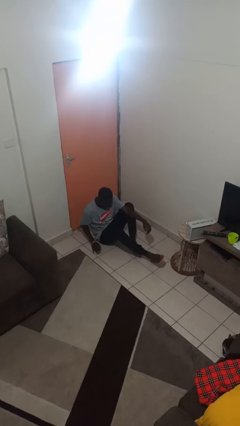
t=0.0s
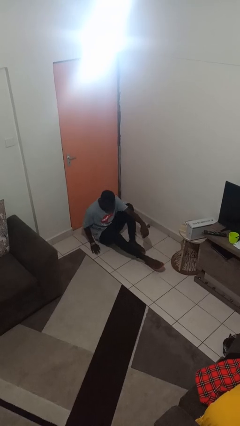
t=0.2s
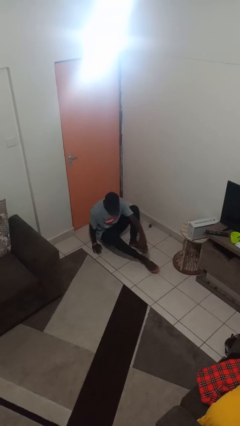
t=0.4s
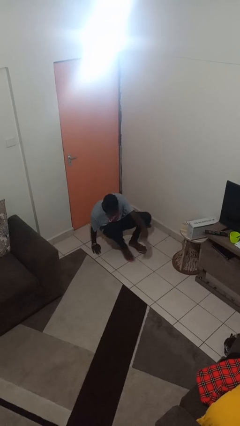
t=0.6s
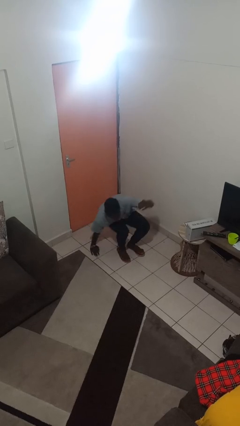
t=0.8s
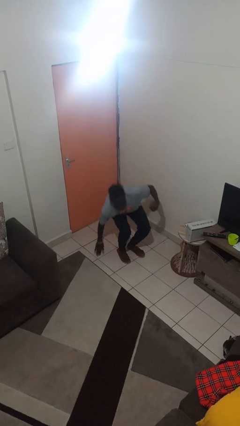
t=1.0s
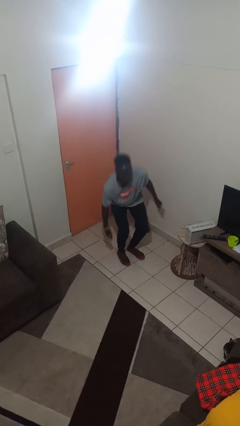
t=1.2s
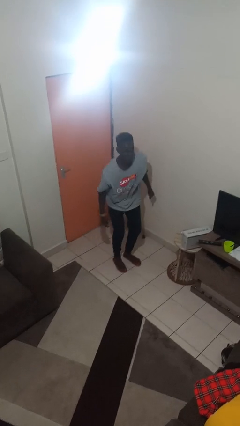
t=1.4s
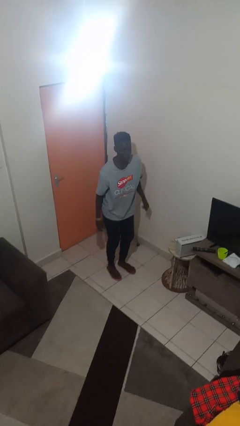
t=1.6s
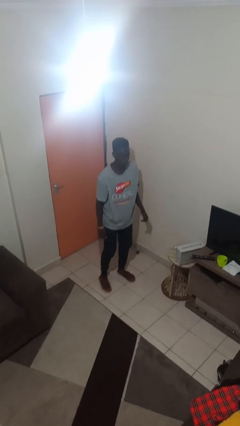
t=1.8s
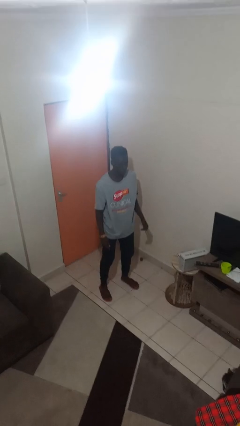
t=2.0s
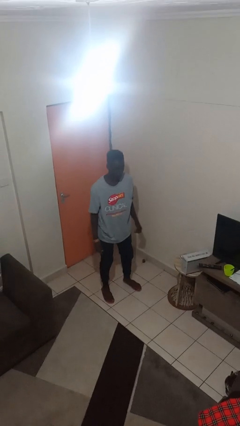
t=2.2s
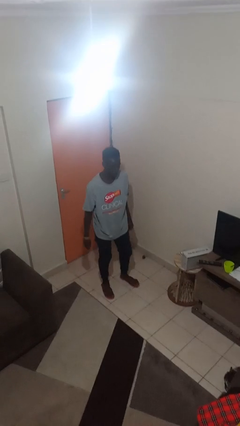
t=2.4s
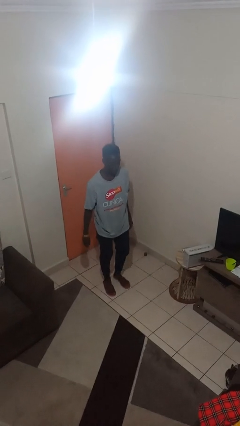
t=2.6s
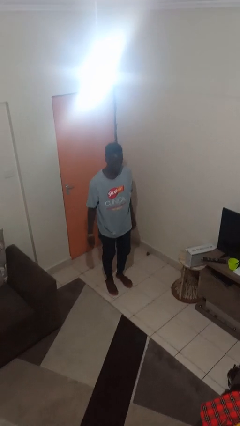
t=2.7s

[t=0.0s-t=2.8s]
person stands up from floor

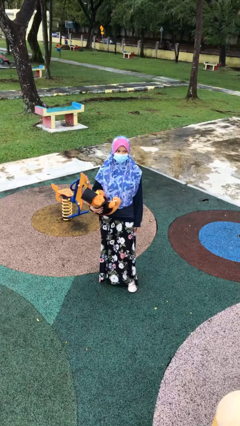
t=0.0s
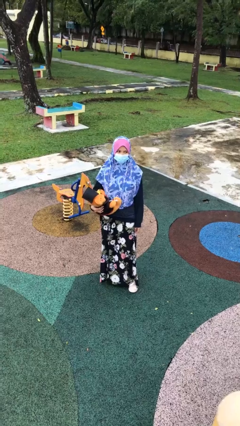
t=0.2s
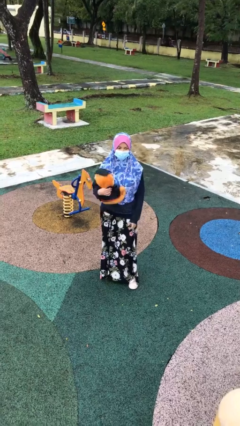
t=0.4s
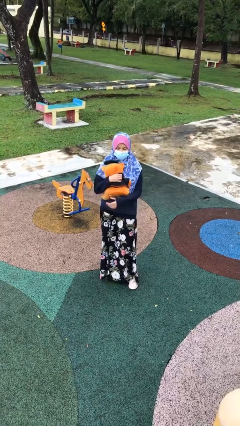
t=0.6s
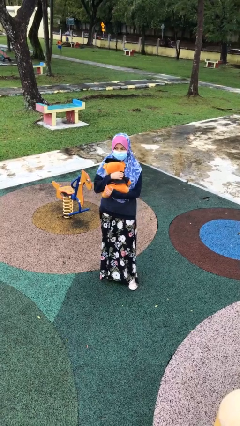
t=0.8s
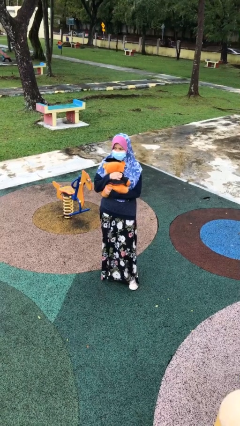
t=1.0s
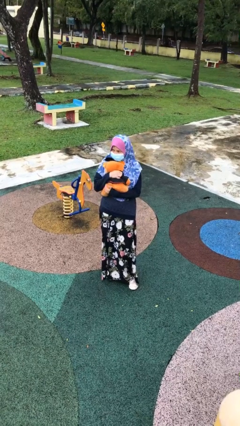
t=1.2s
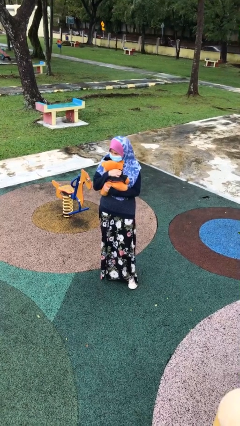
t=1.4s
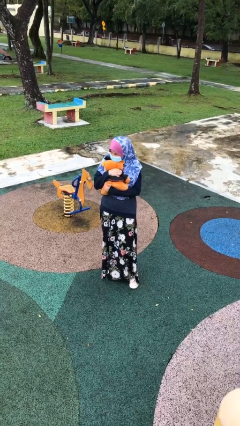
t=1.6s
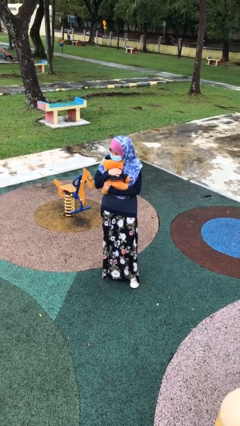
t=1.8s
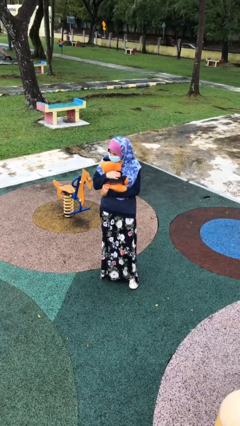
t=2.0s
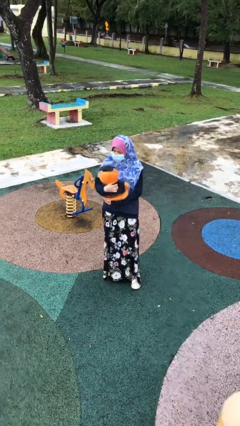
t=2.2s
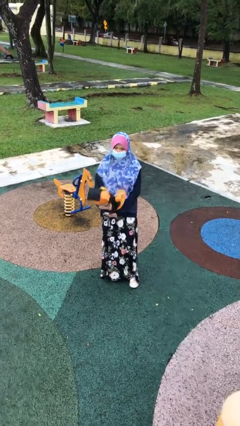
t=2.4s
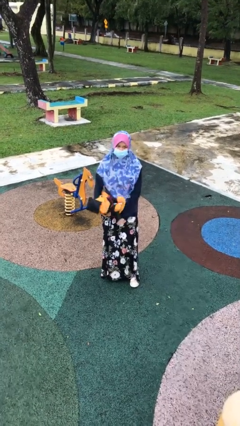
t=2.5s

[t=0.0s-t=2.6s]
person hugs stuffed animal

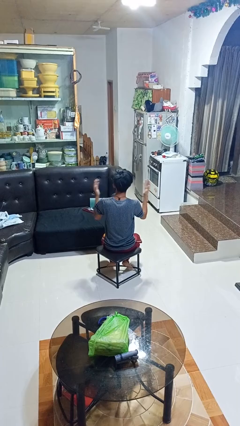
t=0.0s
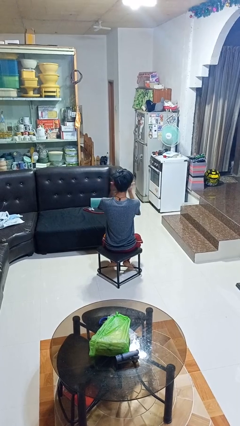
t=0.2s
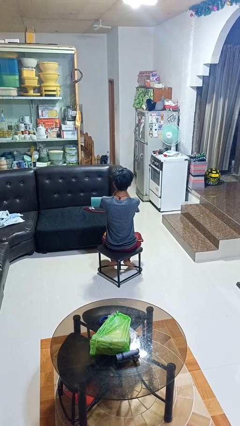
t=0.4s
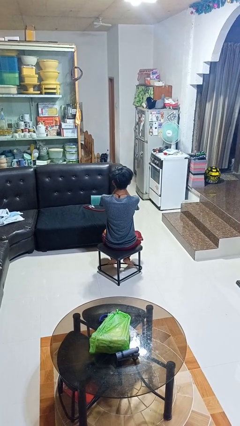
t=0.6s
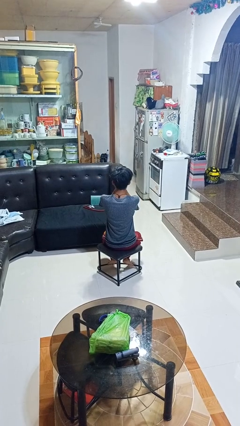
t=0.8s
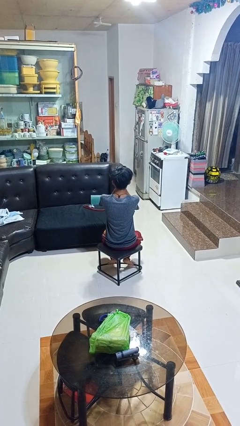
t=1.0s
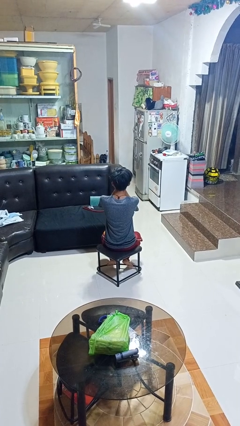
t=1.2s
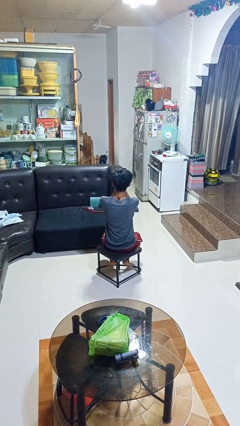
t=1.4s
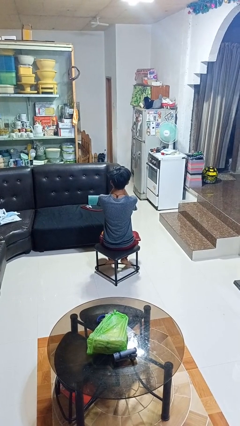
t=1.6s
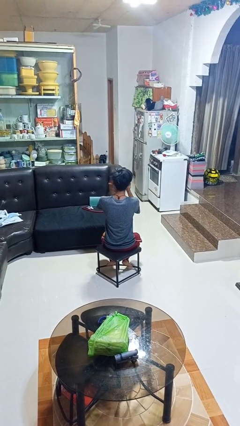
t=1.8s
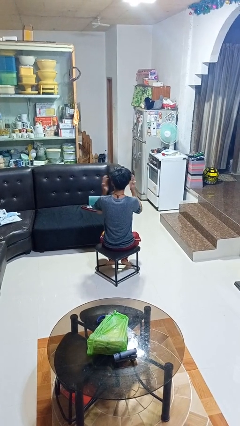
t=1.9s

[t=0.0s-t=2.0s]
person covers face with hands

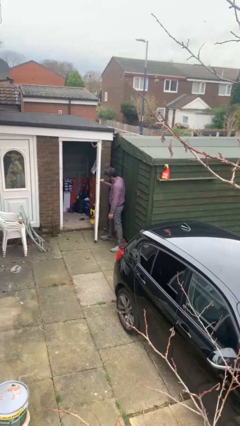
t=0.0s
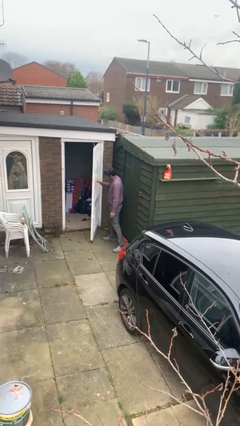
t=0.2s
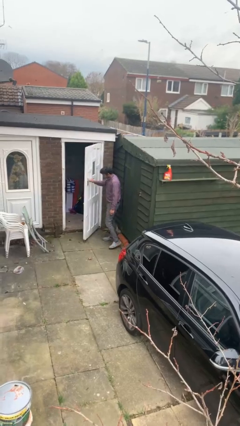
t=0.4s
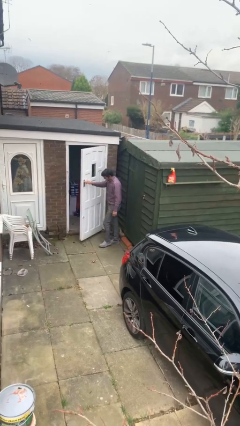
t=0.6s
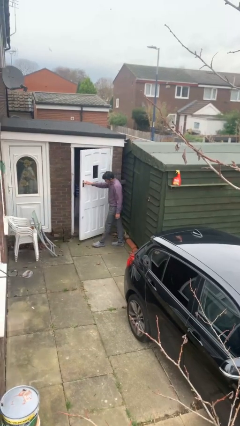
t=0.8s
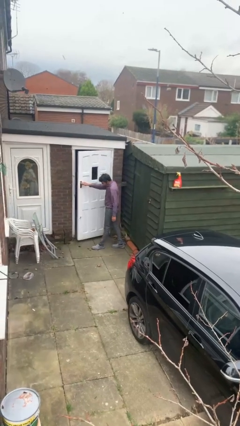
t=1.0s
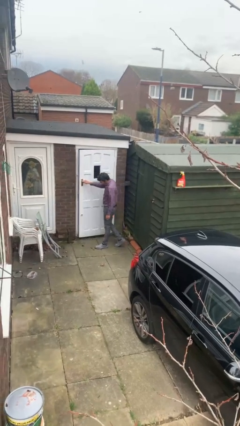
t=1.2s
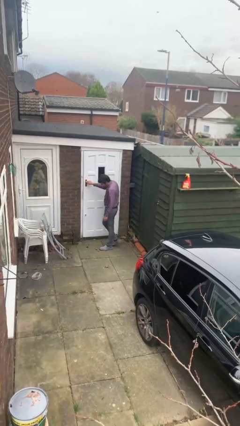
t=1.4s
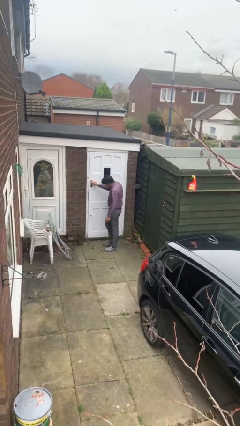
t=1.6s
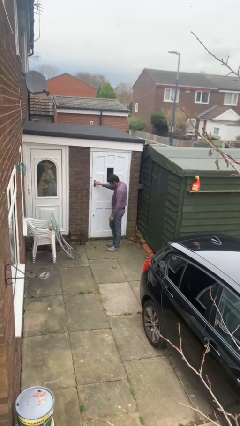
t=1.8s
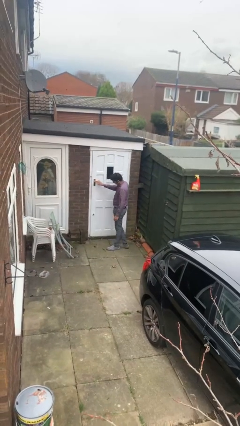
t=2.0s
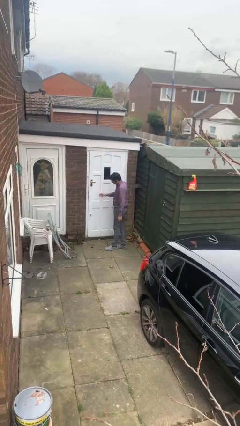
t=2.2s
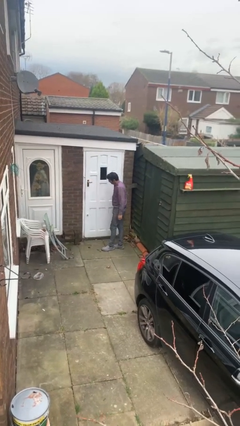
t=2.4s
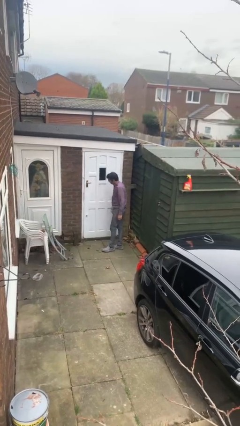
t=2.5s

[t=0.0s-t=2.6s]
person closes facility door

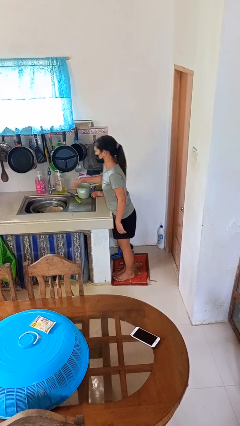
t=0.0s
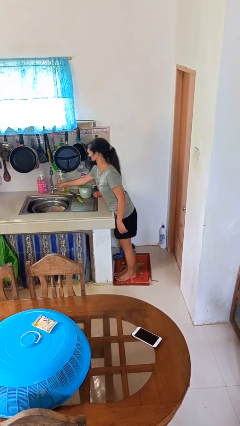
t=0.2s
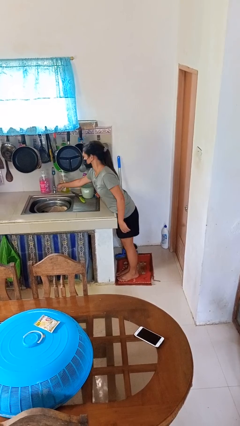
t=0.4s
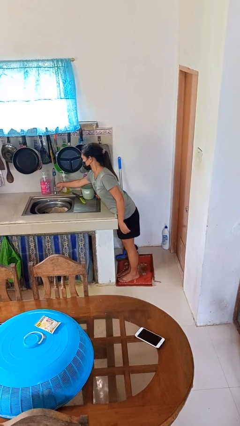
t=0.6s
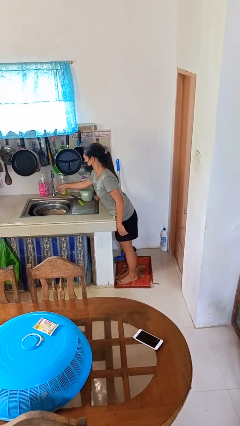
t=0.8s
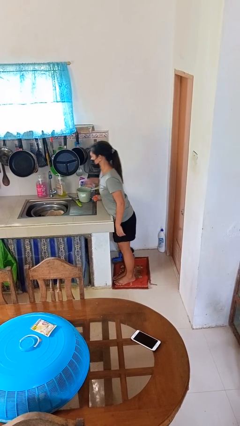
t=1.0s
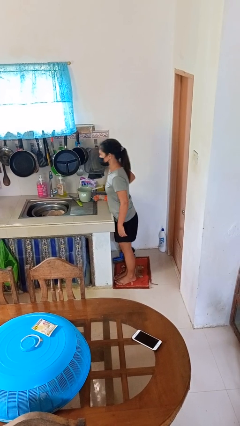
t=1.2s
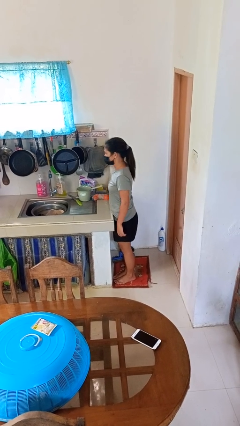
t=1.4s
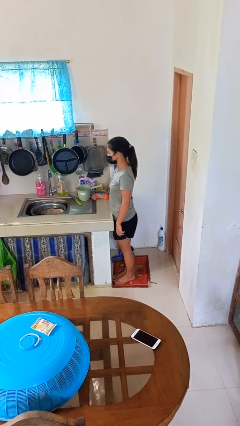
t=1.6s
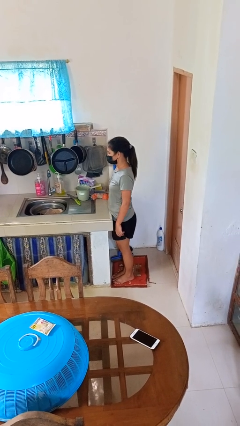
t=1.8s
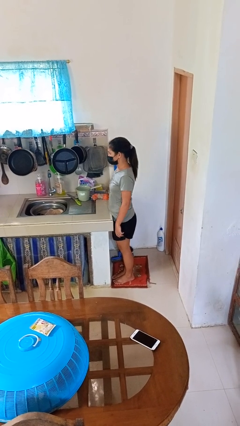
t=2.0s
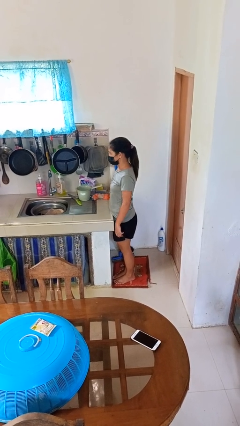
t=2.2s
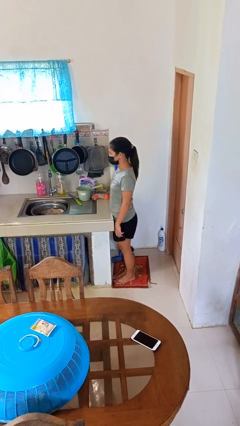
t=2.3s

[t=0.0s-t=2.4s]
person turns off faucet

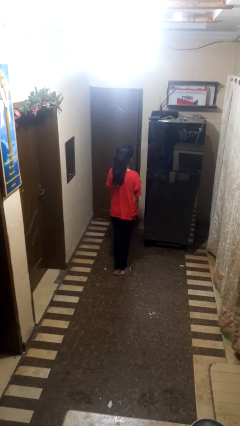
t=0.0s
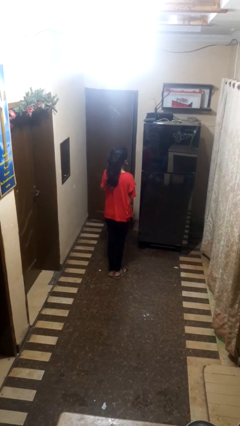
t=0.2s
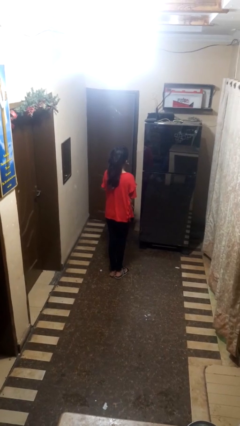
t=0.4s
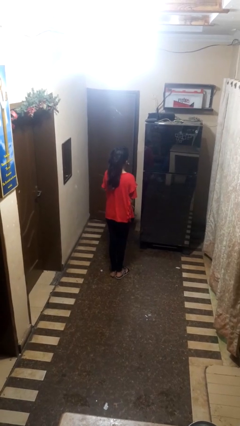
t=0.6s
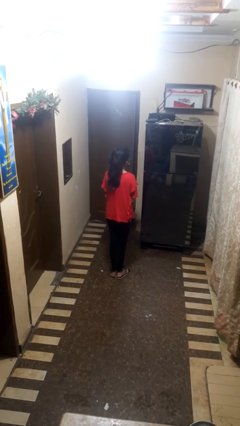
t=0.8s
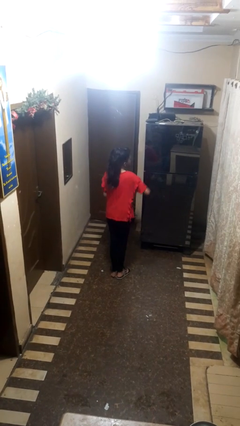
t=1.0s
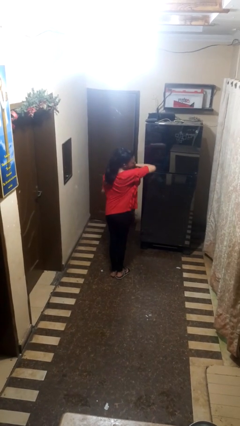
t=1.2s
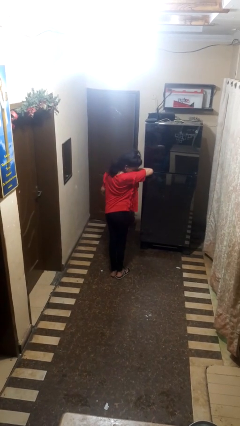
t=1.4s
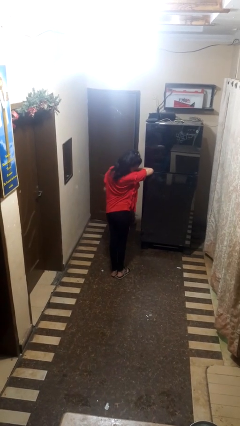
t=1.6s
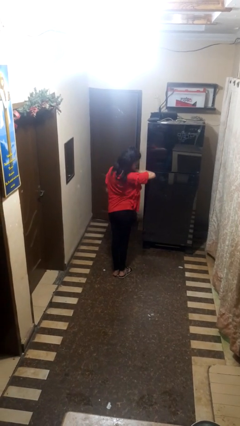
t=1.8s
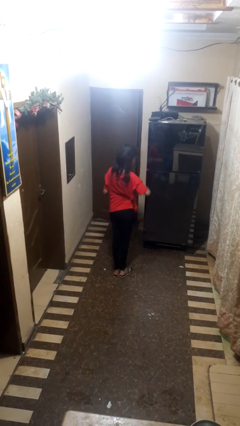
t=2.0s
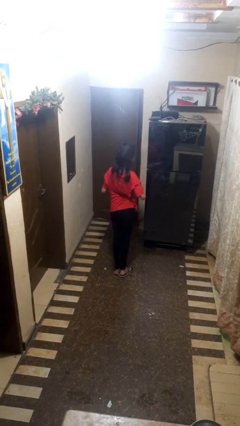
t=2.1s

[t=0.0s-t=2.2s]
person sneezes into arm

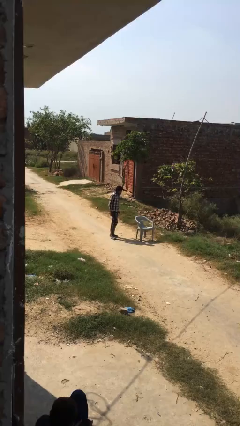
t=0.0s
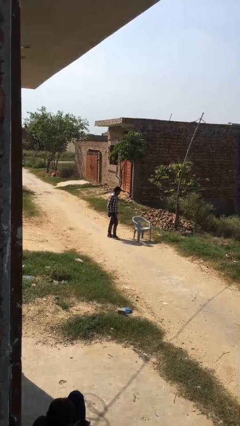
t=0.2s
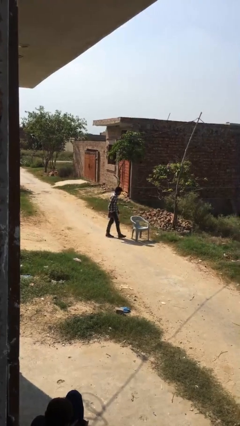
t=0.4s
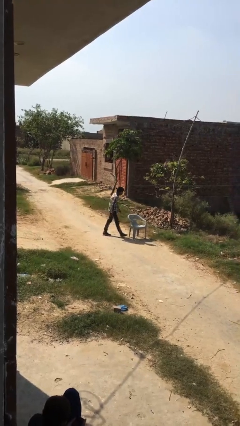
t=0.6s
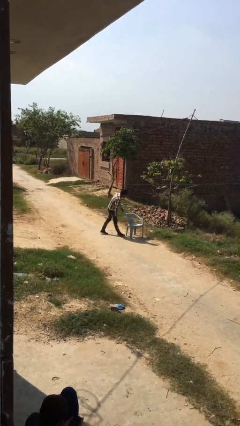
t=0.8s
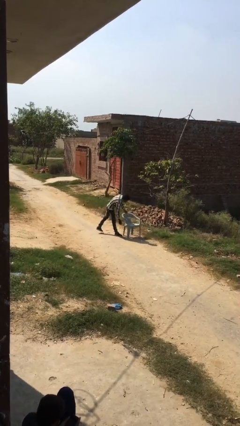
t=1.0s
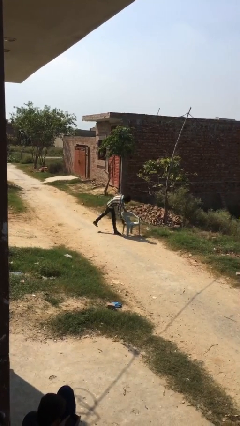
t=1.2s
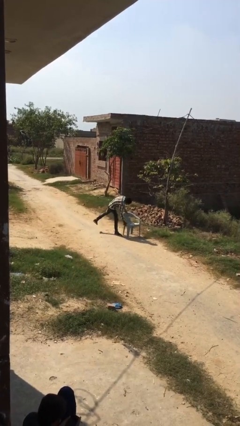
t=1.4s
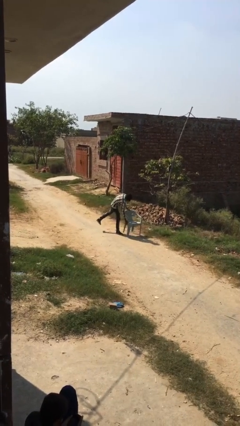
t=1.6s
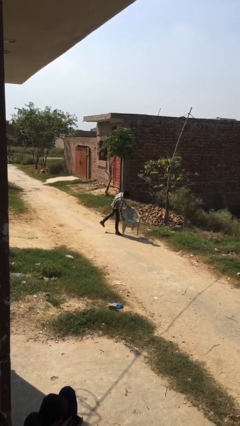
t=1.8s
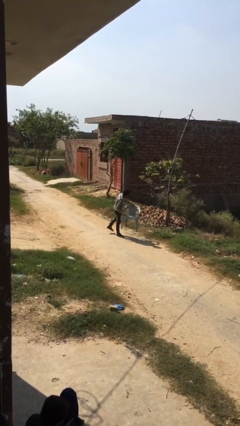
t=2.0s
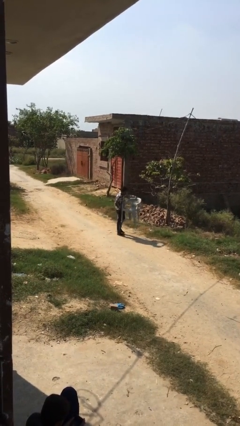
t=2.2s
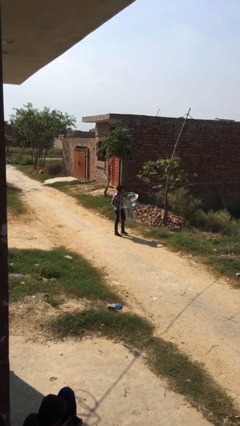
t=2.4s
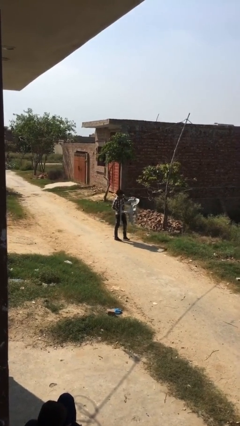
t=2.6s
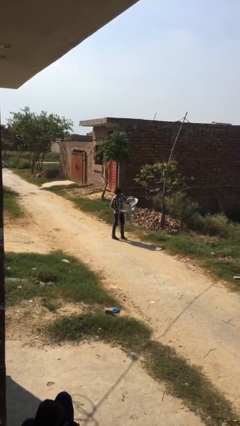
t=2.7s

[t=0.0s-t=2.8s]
person picks up object from floor
